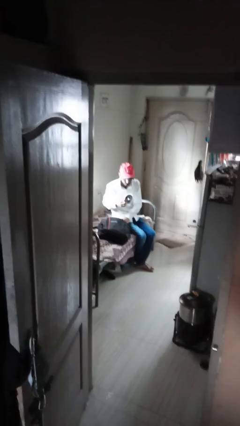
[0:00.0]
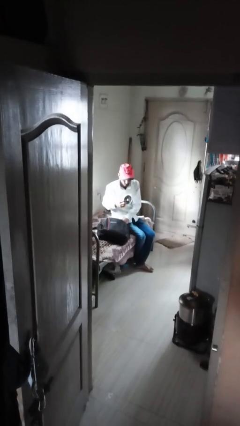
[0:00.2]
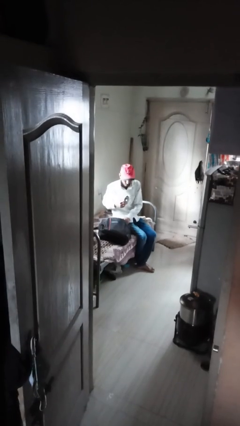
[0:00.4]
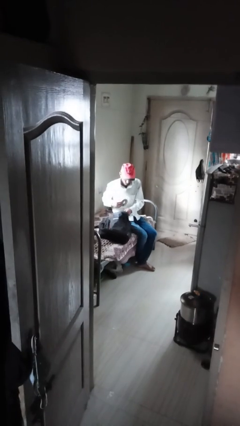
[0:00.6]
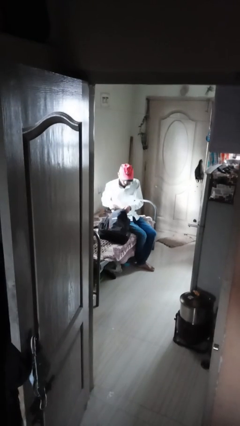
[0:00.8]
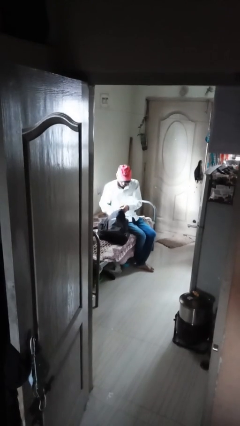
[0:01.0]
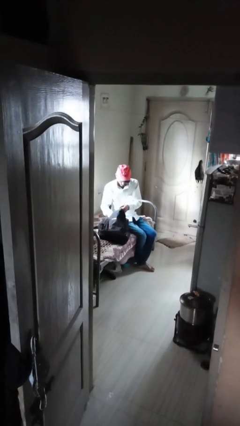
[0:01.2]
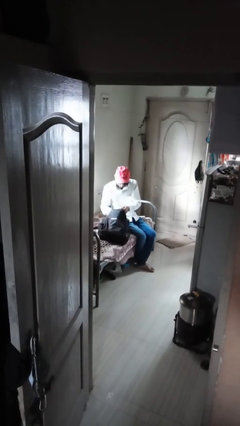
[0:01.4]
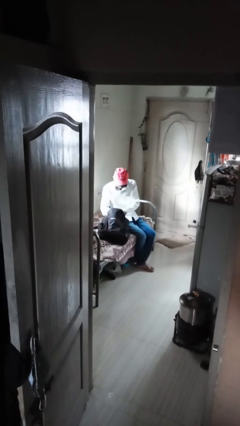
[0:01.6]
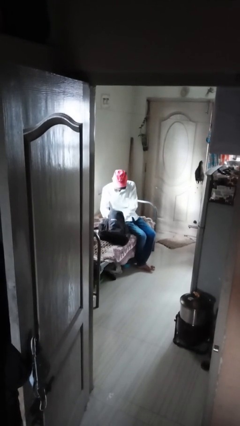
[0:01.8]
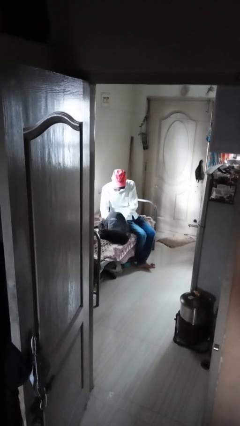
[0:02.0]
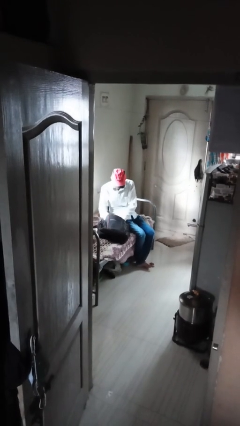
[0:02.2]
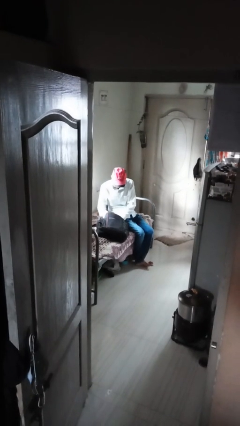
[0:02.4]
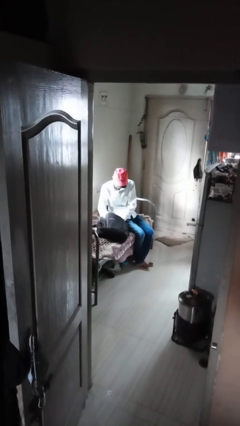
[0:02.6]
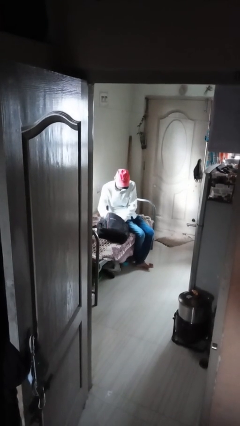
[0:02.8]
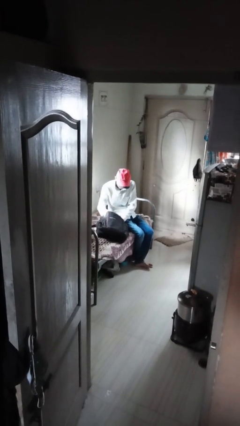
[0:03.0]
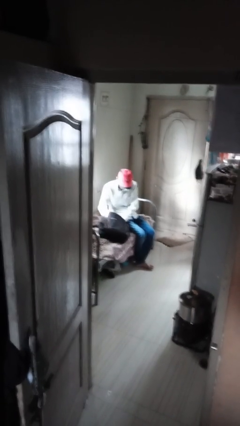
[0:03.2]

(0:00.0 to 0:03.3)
person puts object into backpack

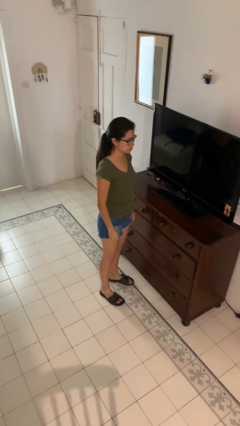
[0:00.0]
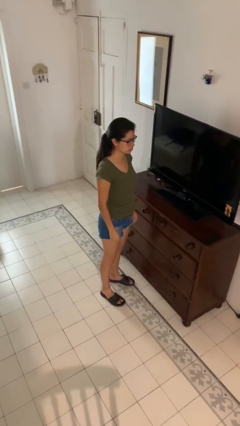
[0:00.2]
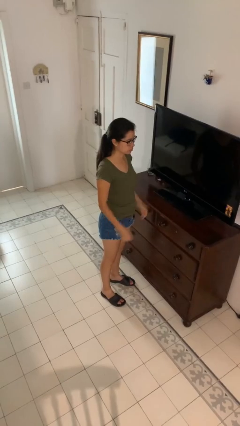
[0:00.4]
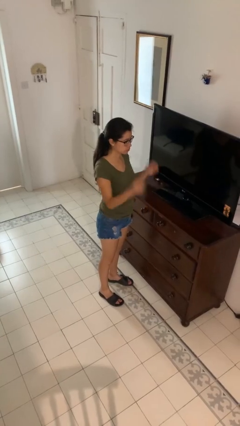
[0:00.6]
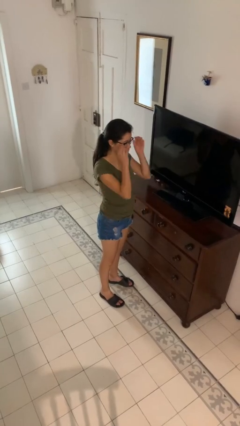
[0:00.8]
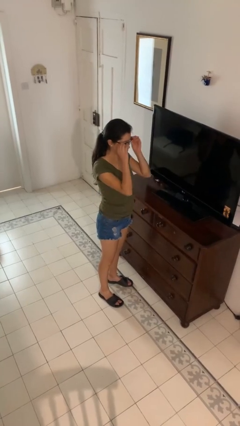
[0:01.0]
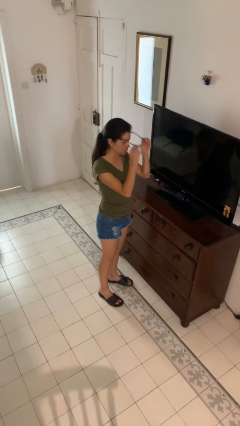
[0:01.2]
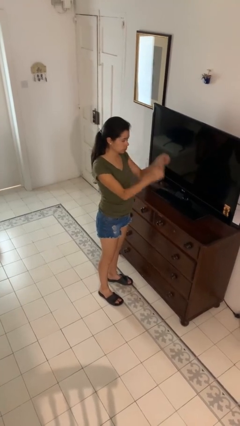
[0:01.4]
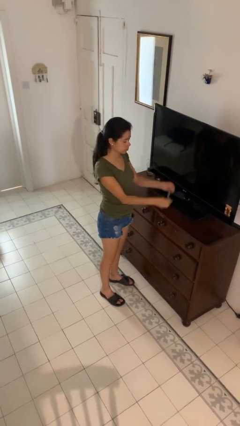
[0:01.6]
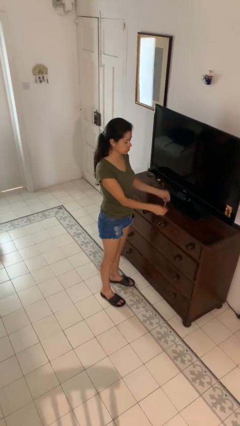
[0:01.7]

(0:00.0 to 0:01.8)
person takes off glasses

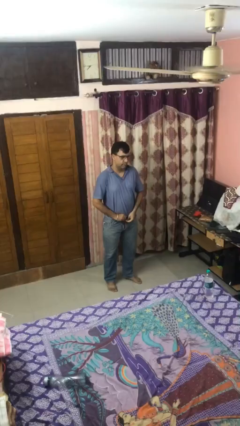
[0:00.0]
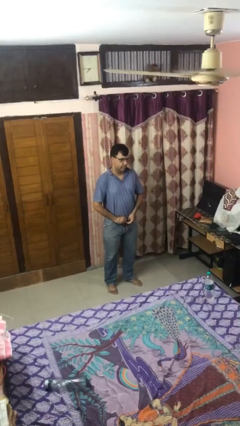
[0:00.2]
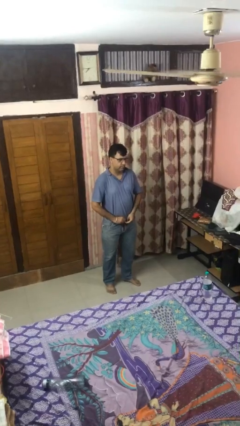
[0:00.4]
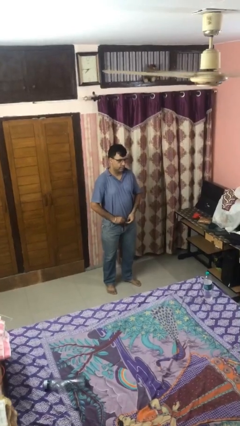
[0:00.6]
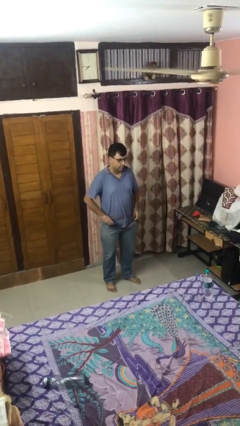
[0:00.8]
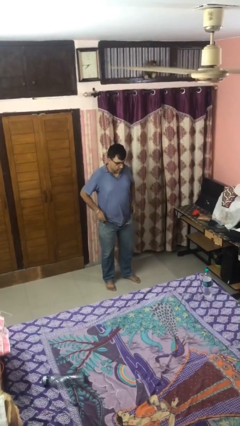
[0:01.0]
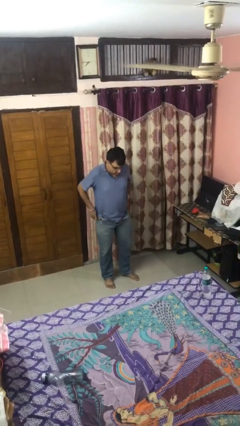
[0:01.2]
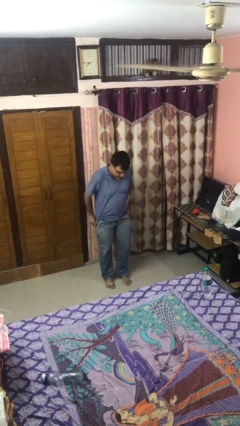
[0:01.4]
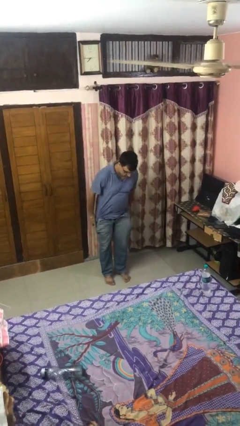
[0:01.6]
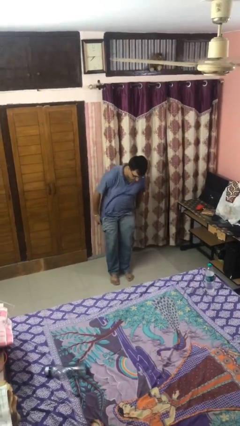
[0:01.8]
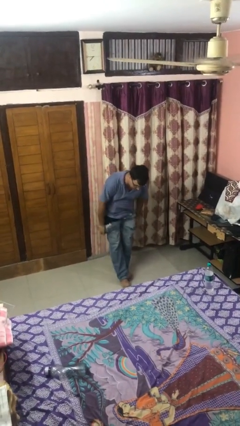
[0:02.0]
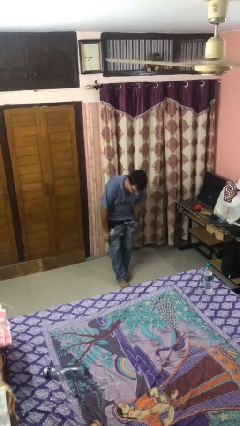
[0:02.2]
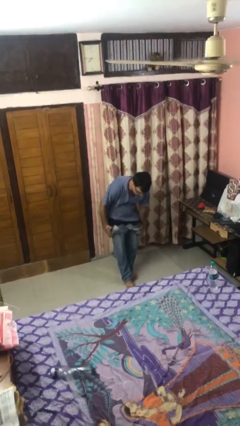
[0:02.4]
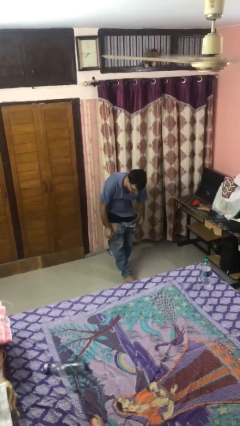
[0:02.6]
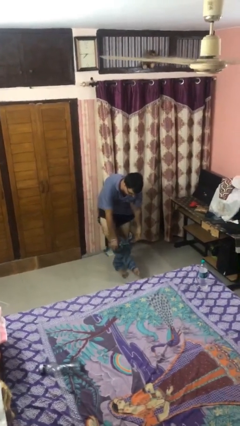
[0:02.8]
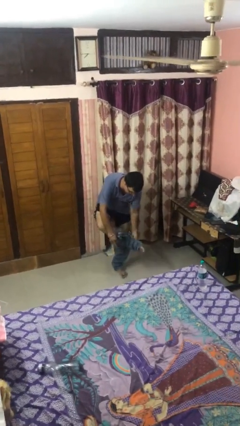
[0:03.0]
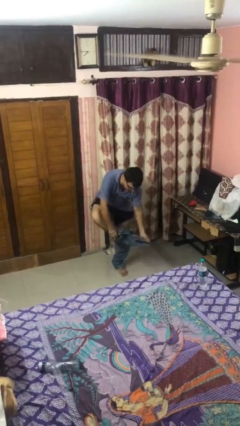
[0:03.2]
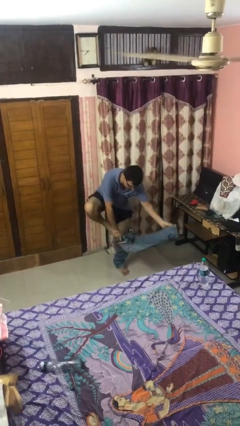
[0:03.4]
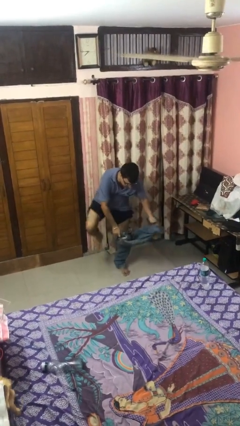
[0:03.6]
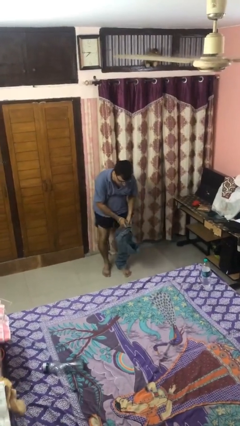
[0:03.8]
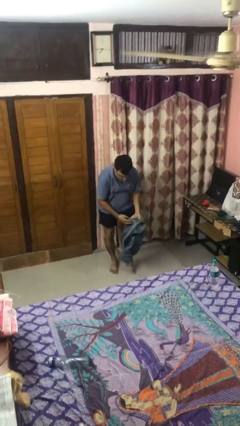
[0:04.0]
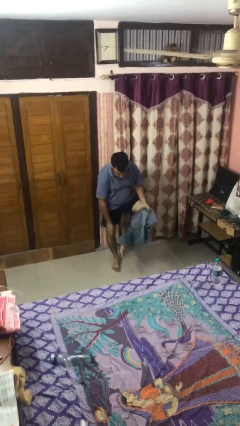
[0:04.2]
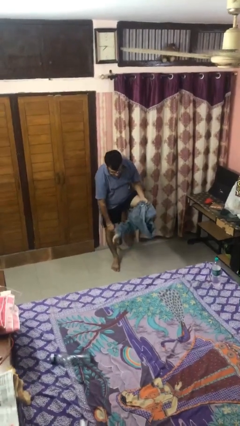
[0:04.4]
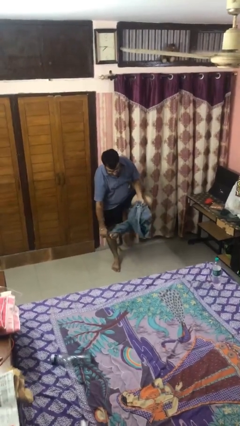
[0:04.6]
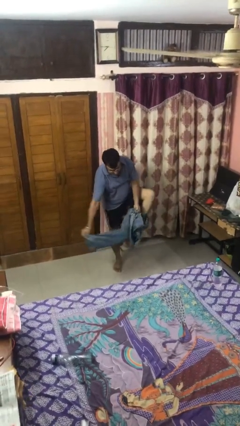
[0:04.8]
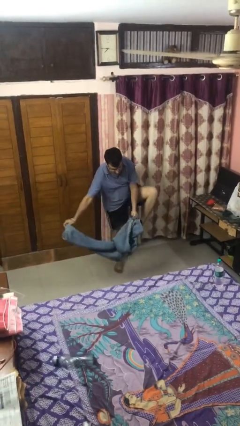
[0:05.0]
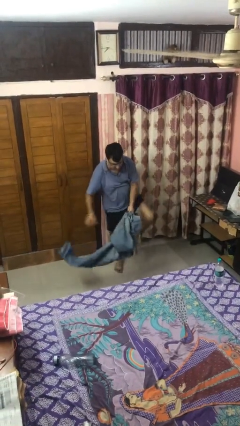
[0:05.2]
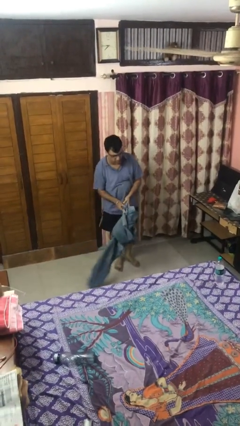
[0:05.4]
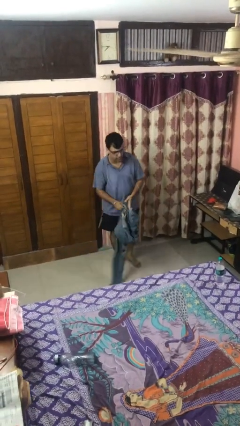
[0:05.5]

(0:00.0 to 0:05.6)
person takes off pants

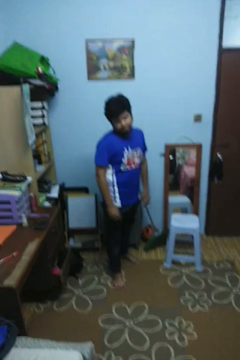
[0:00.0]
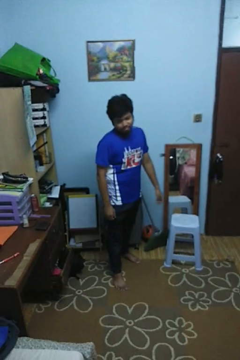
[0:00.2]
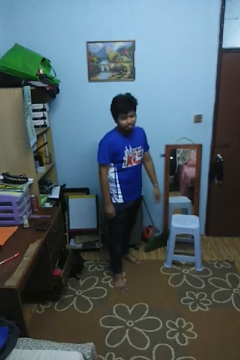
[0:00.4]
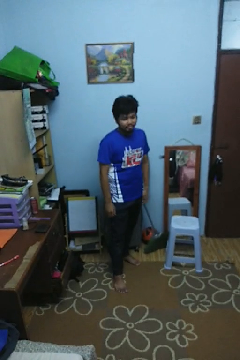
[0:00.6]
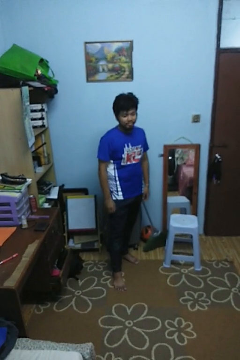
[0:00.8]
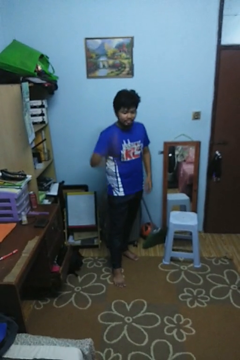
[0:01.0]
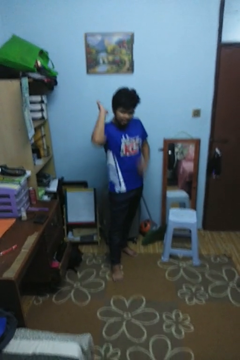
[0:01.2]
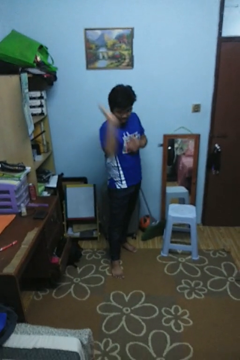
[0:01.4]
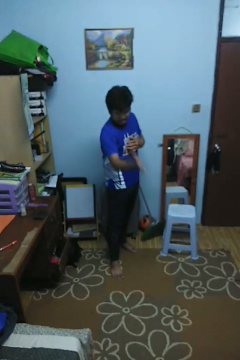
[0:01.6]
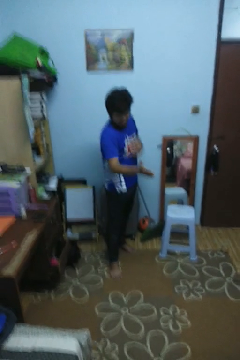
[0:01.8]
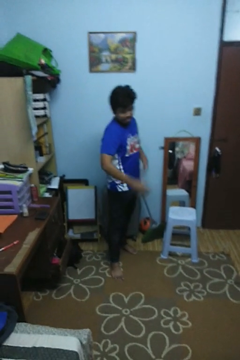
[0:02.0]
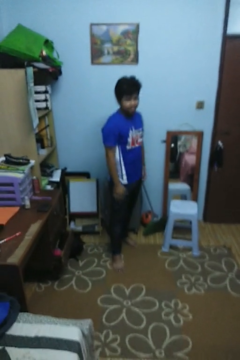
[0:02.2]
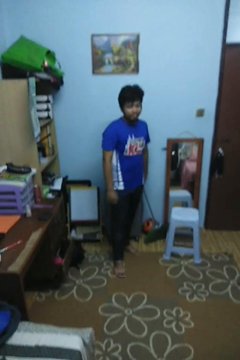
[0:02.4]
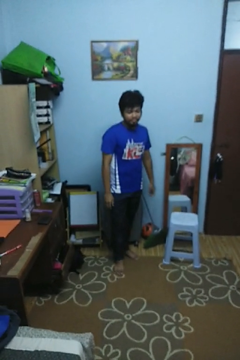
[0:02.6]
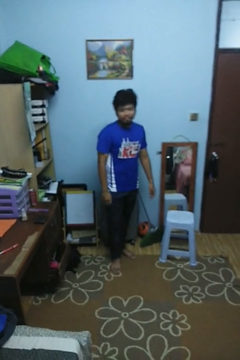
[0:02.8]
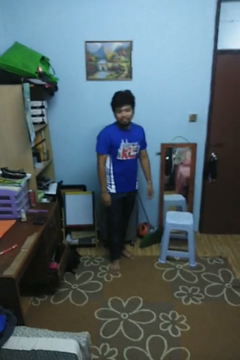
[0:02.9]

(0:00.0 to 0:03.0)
person karate chop

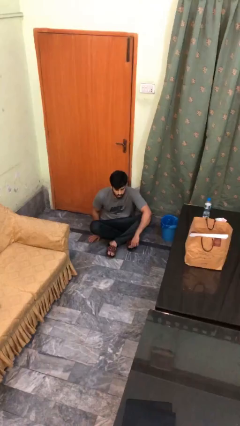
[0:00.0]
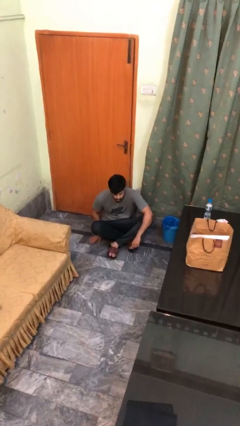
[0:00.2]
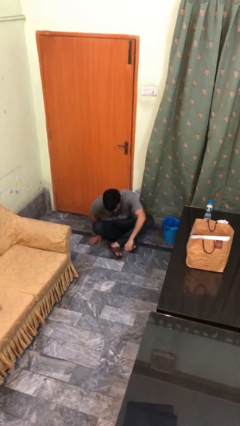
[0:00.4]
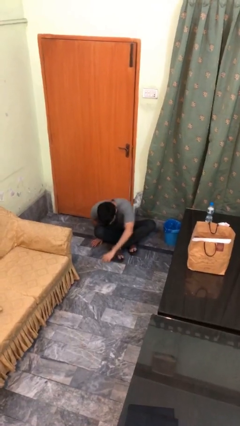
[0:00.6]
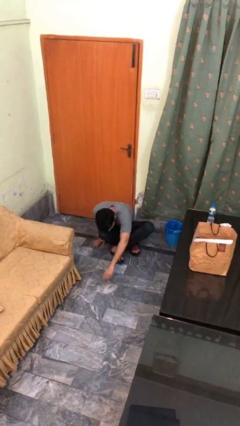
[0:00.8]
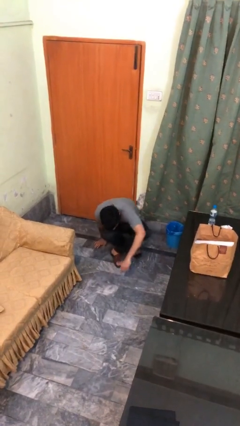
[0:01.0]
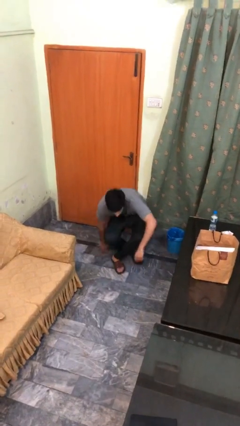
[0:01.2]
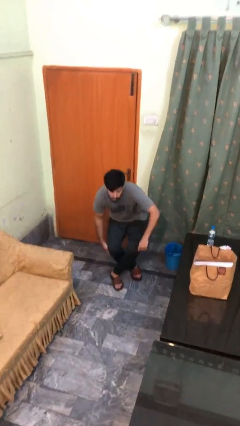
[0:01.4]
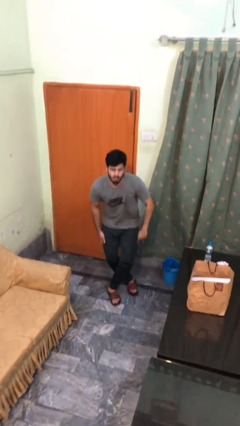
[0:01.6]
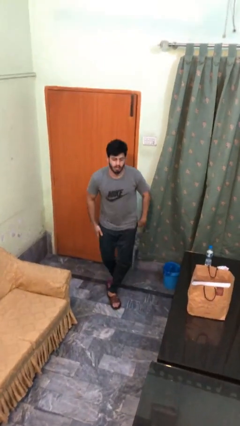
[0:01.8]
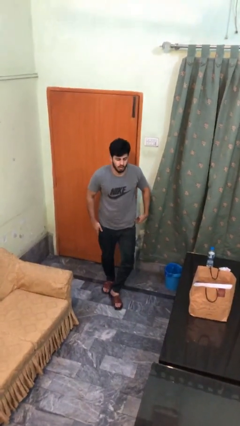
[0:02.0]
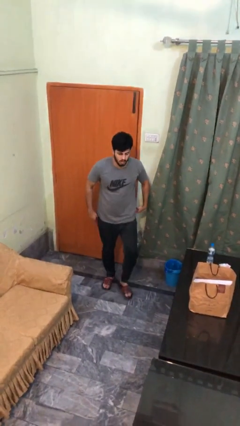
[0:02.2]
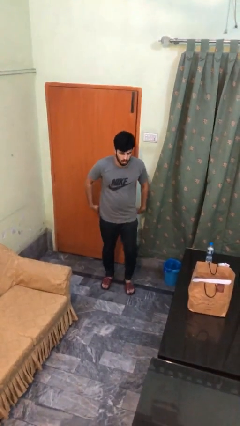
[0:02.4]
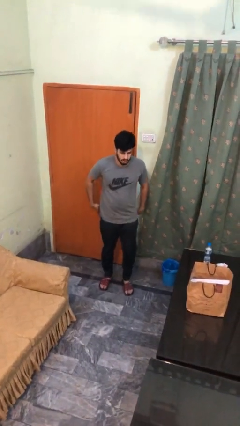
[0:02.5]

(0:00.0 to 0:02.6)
person stands up from floor

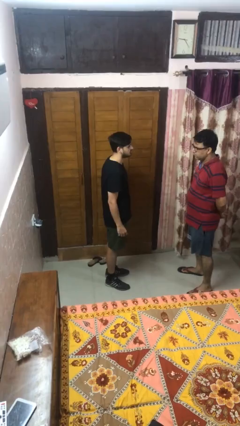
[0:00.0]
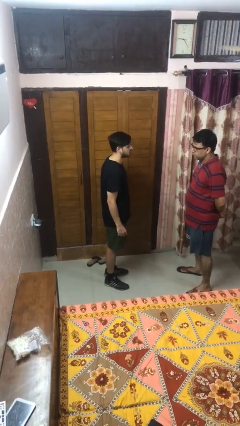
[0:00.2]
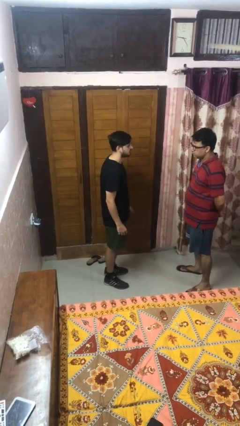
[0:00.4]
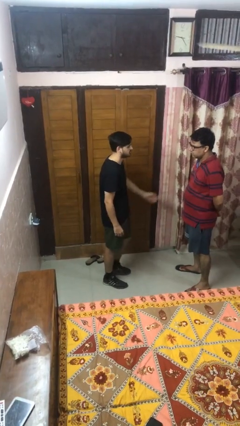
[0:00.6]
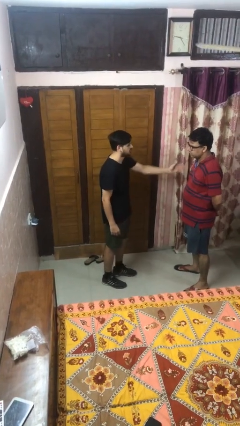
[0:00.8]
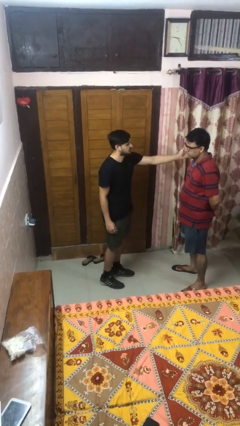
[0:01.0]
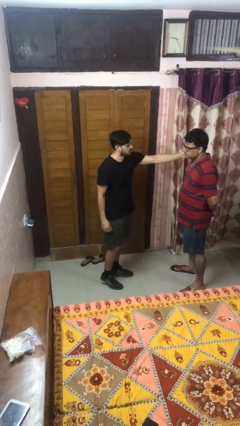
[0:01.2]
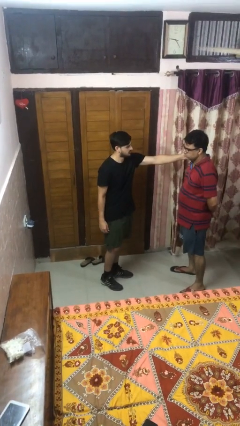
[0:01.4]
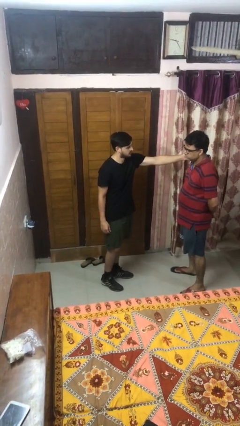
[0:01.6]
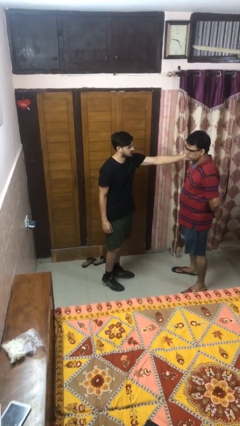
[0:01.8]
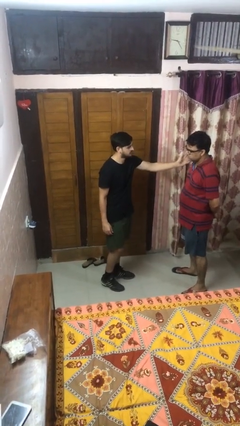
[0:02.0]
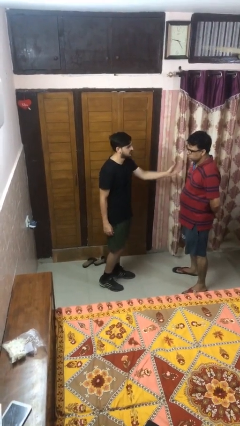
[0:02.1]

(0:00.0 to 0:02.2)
person touches face of person
